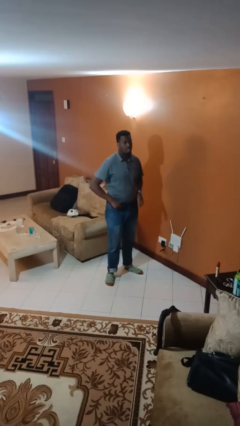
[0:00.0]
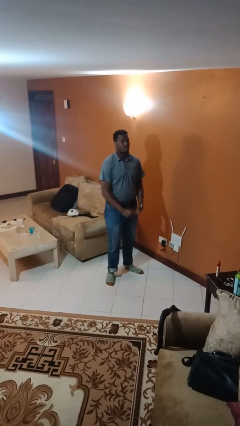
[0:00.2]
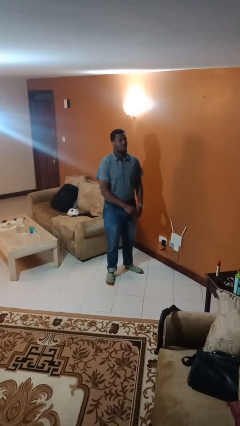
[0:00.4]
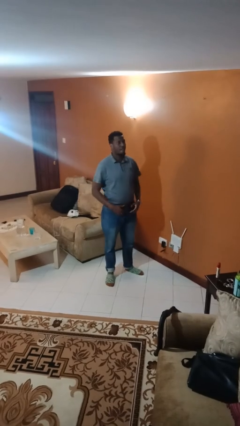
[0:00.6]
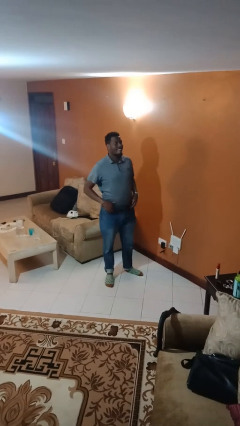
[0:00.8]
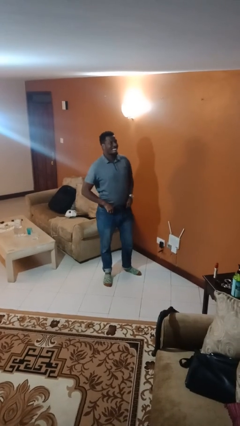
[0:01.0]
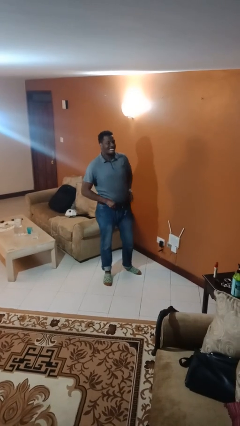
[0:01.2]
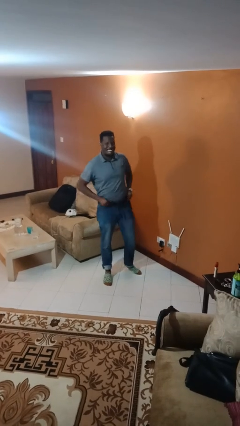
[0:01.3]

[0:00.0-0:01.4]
person hikes up pants

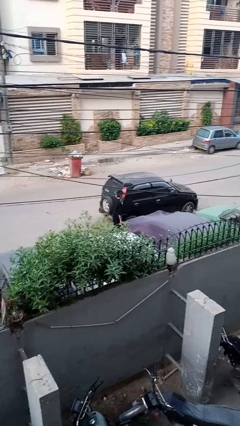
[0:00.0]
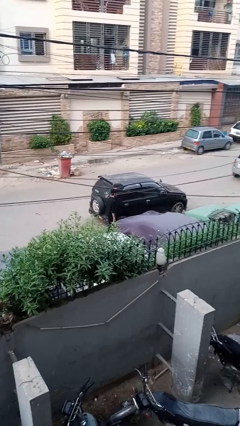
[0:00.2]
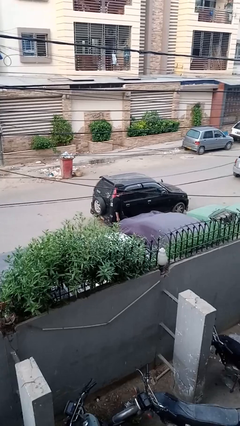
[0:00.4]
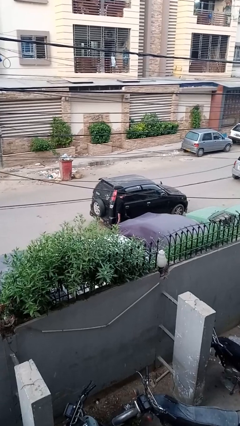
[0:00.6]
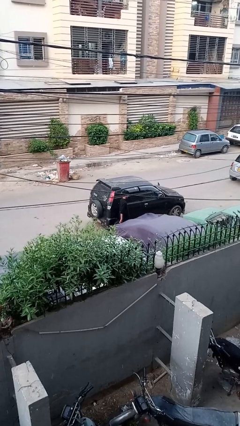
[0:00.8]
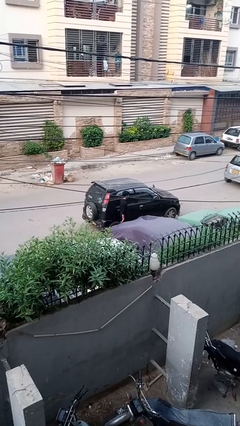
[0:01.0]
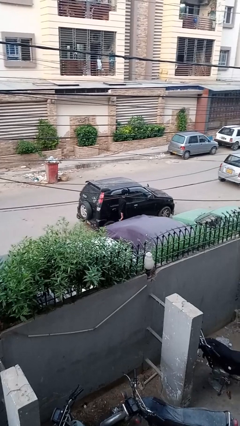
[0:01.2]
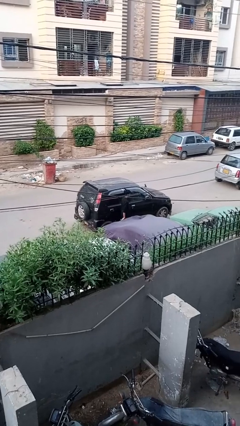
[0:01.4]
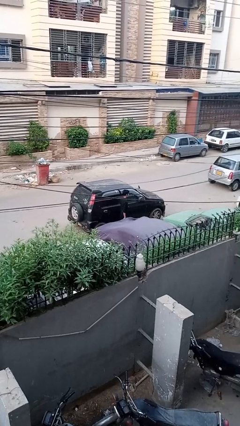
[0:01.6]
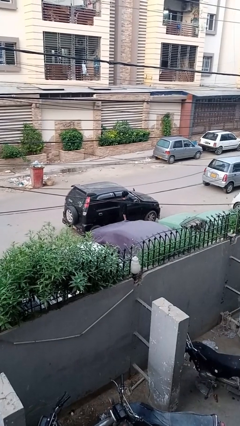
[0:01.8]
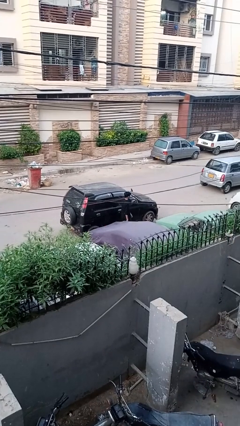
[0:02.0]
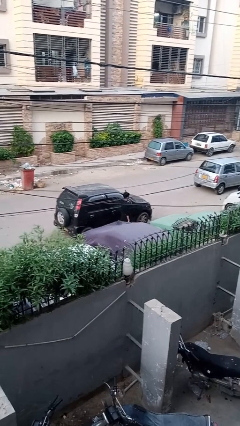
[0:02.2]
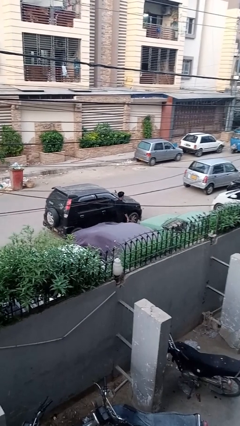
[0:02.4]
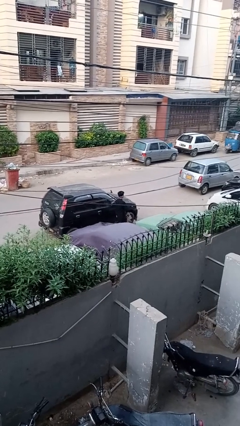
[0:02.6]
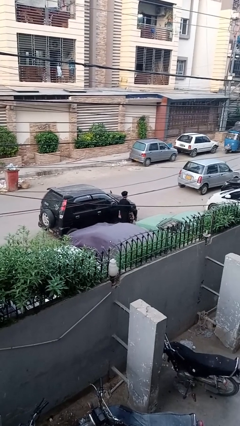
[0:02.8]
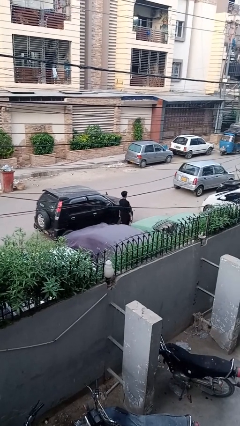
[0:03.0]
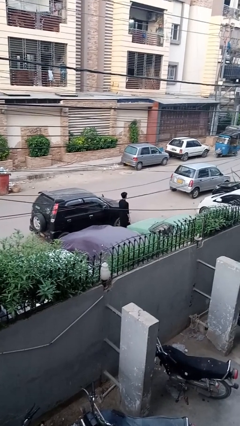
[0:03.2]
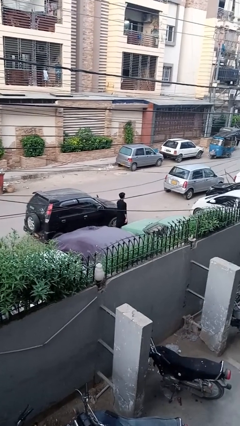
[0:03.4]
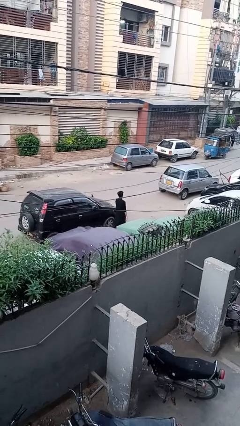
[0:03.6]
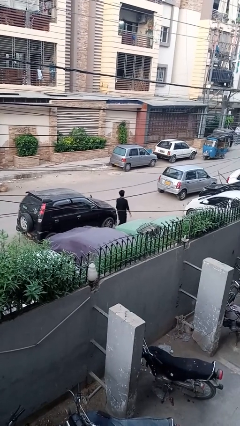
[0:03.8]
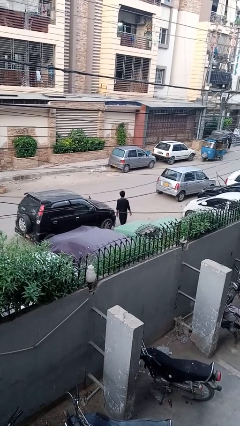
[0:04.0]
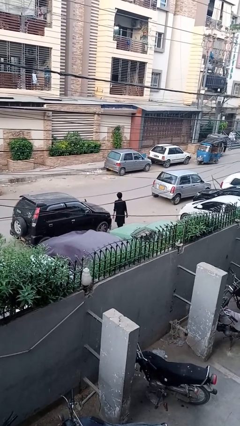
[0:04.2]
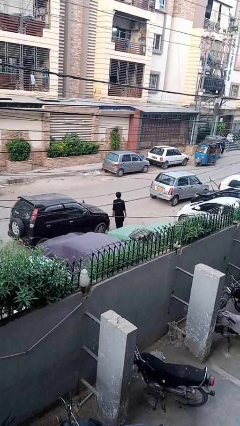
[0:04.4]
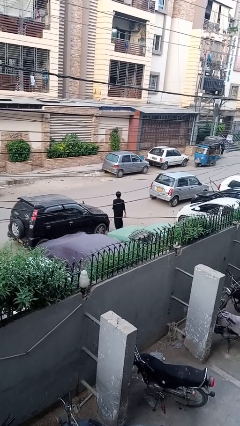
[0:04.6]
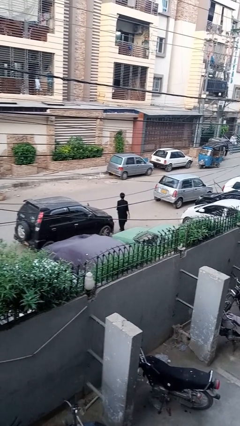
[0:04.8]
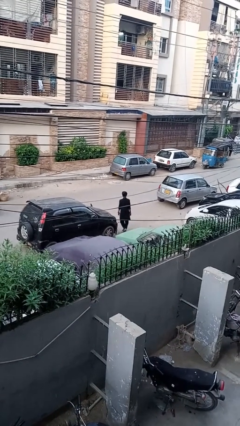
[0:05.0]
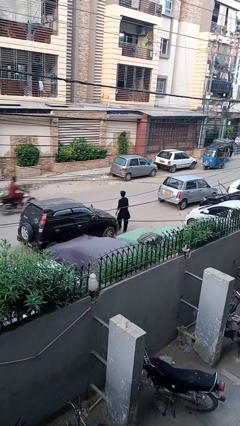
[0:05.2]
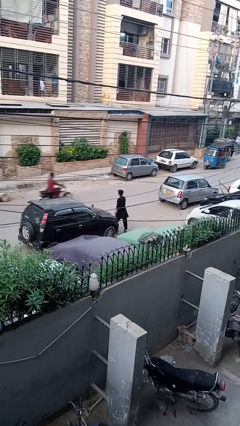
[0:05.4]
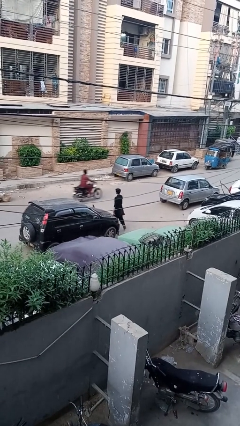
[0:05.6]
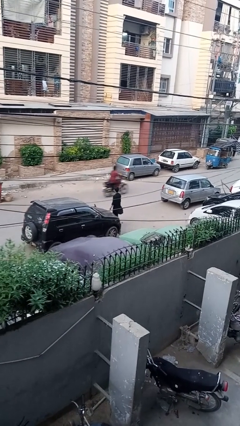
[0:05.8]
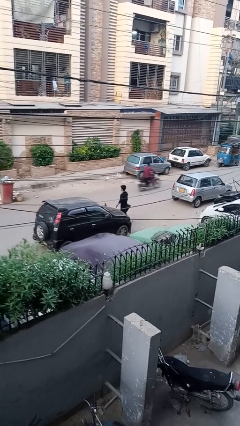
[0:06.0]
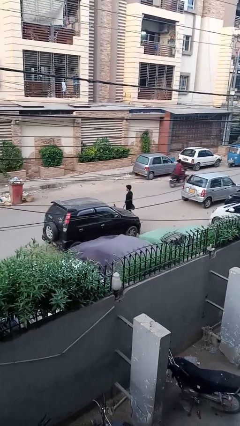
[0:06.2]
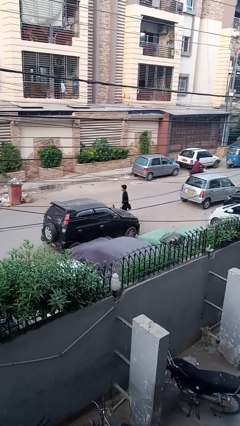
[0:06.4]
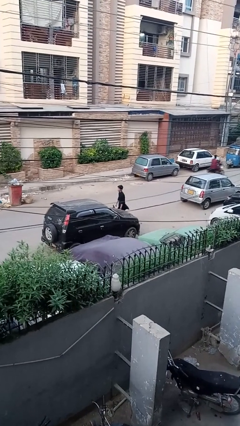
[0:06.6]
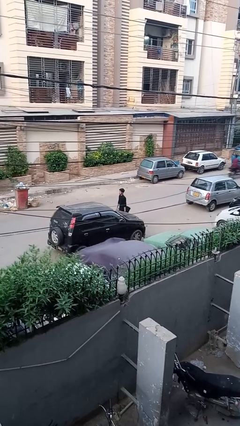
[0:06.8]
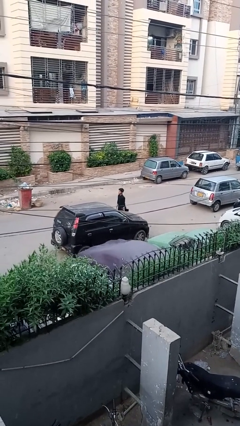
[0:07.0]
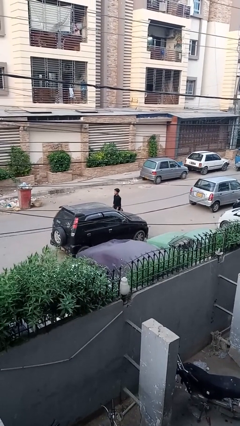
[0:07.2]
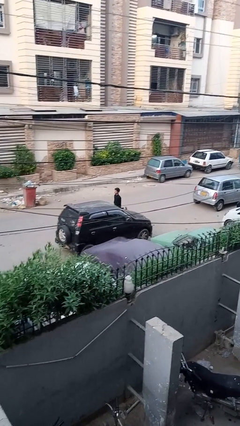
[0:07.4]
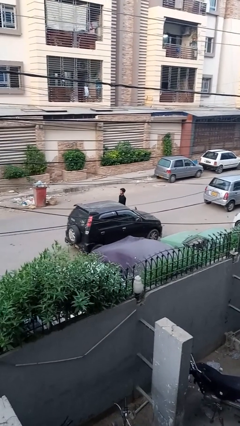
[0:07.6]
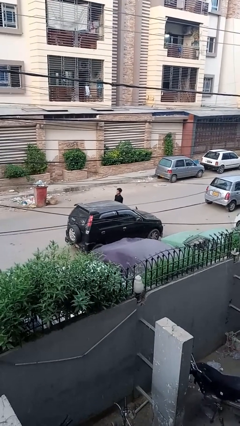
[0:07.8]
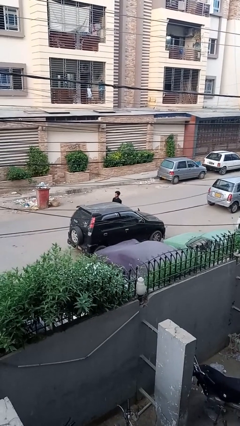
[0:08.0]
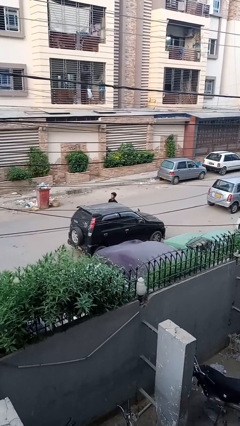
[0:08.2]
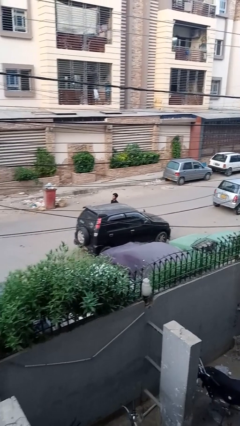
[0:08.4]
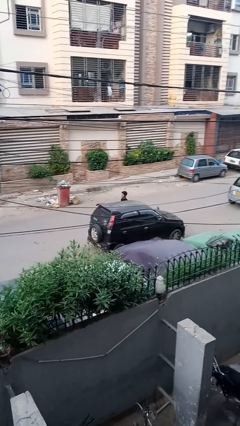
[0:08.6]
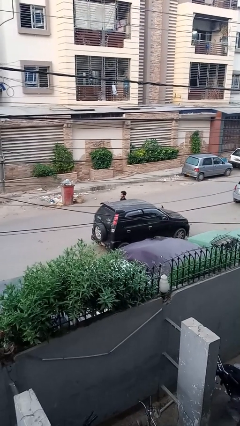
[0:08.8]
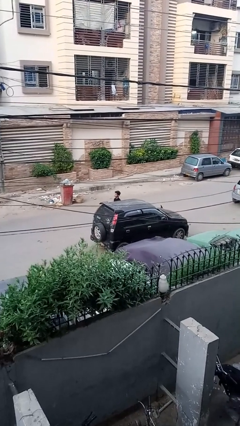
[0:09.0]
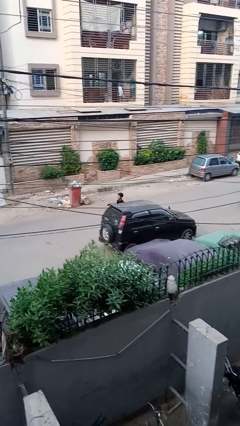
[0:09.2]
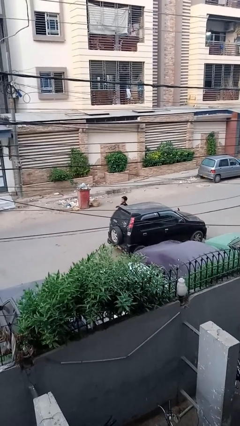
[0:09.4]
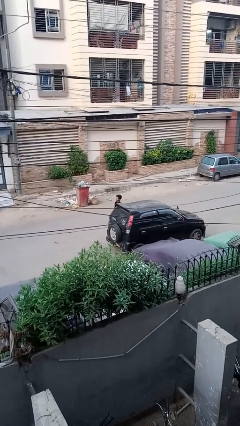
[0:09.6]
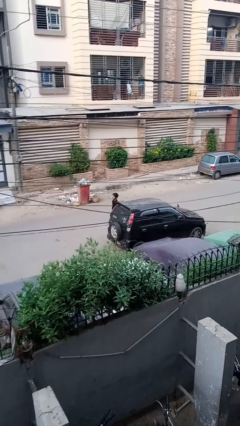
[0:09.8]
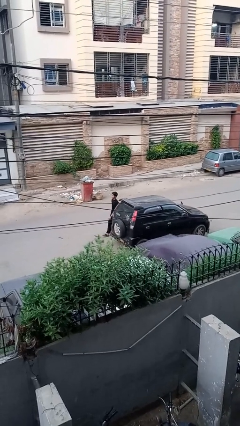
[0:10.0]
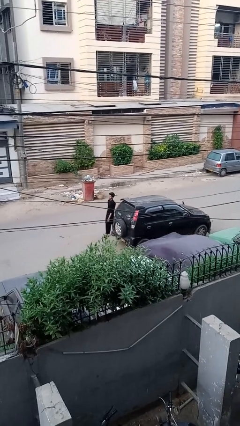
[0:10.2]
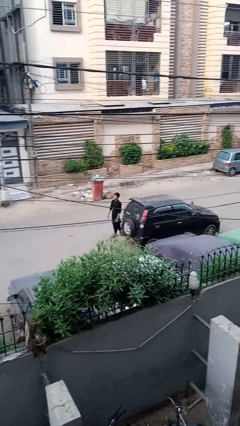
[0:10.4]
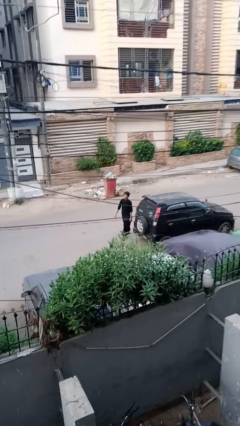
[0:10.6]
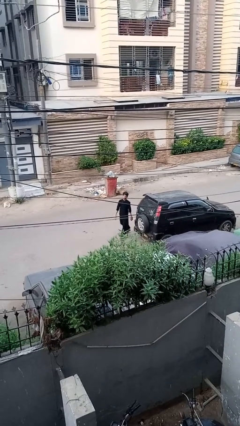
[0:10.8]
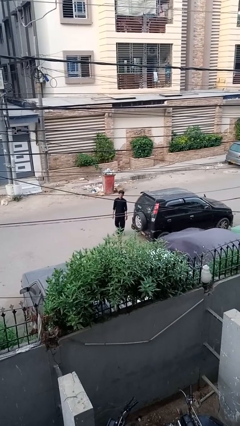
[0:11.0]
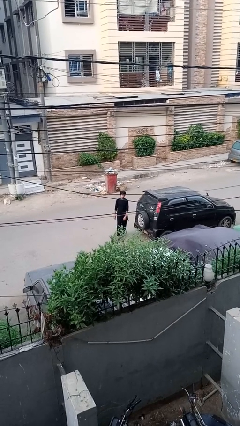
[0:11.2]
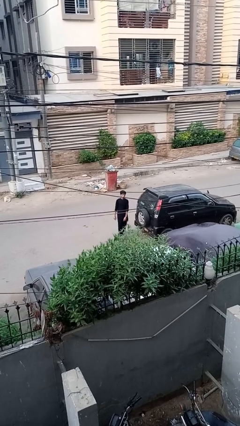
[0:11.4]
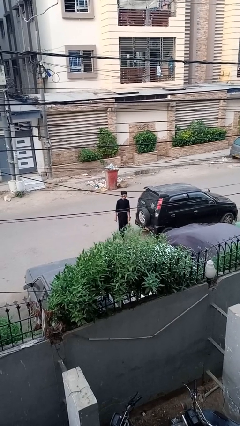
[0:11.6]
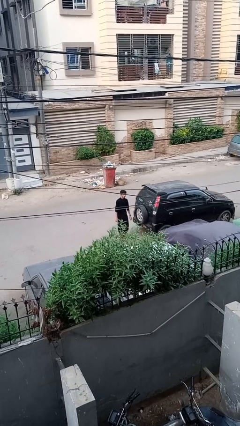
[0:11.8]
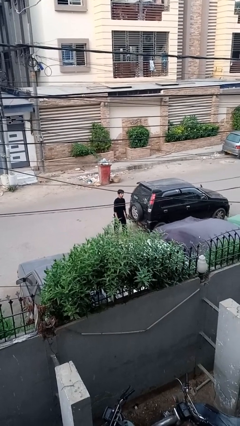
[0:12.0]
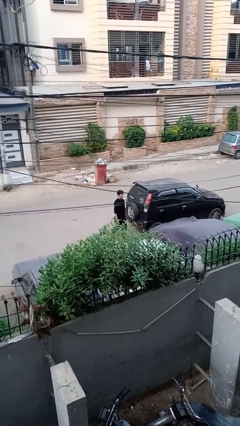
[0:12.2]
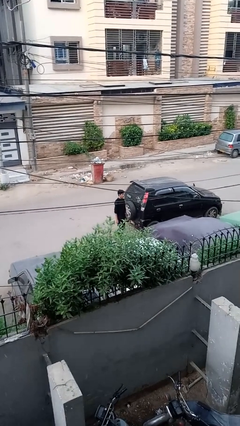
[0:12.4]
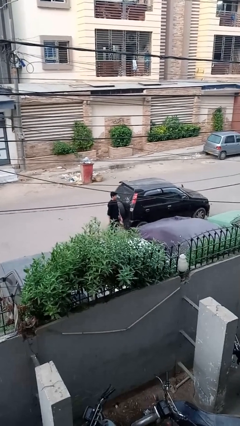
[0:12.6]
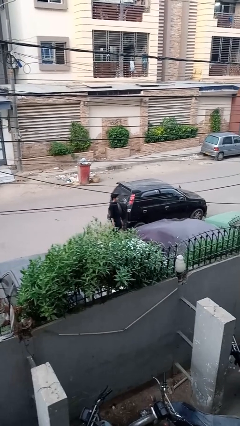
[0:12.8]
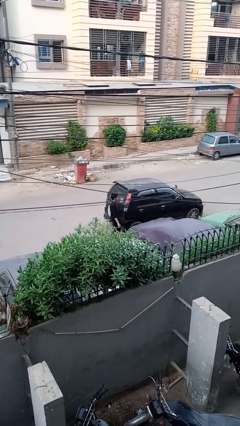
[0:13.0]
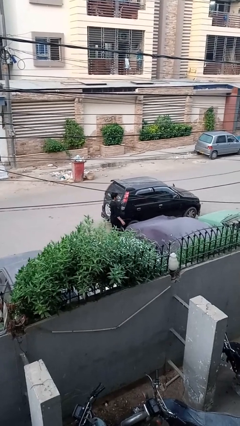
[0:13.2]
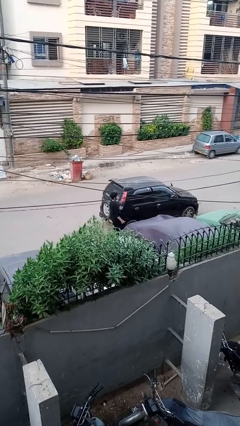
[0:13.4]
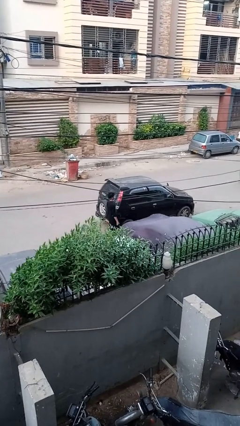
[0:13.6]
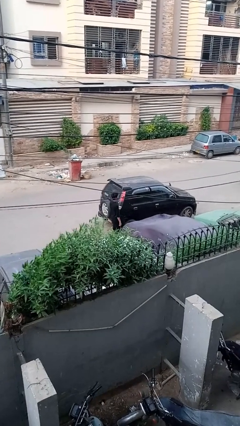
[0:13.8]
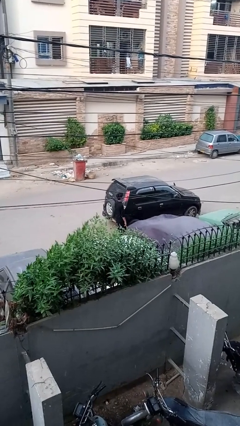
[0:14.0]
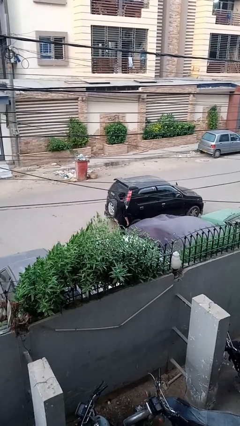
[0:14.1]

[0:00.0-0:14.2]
person walks around car

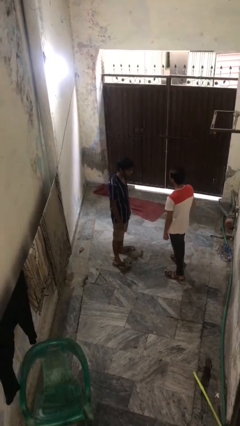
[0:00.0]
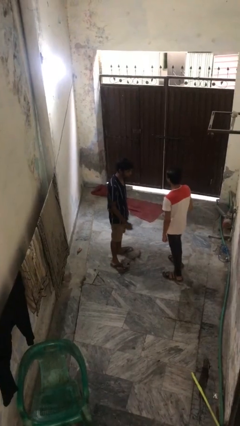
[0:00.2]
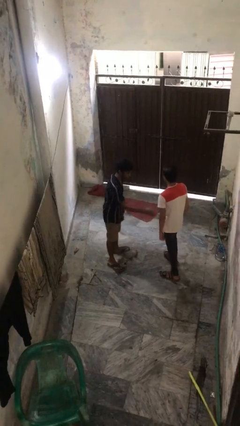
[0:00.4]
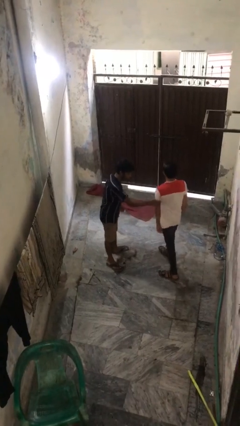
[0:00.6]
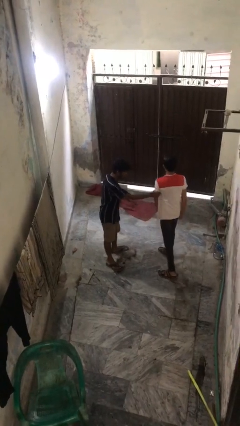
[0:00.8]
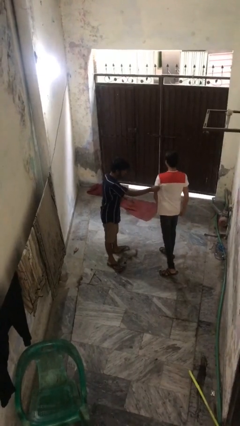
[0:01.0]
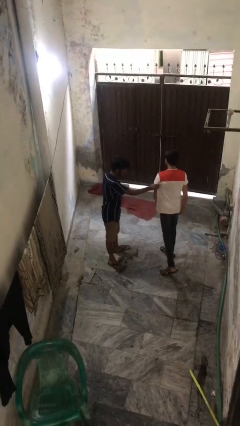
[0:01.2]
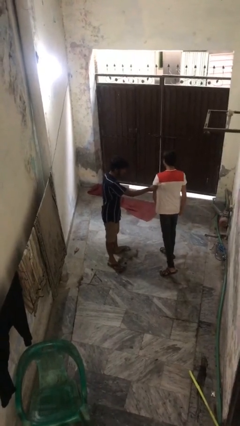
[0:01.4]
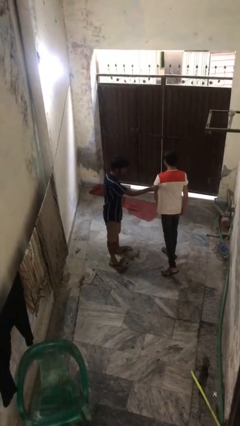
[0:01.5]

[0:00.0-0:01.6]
person grabs person by bicep

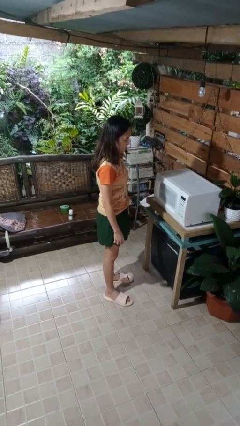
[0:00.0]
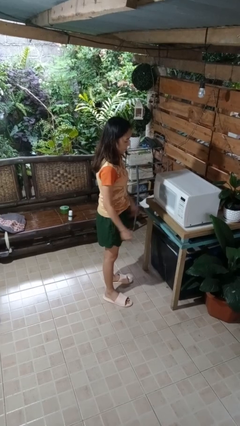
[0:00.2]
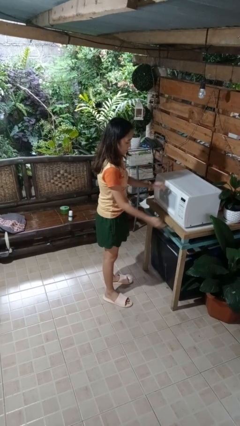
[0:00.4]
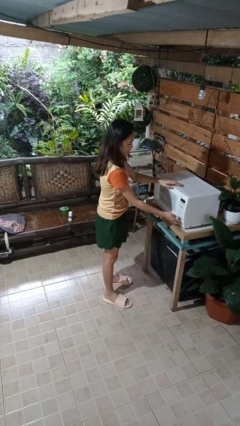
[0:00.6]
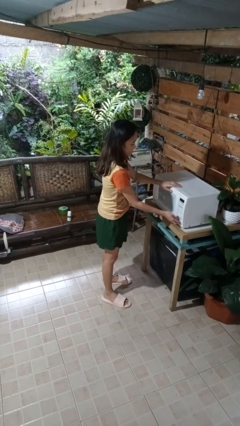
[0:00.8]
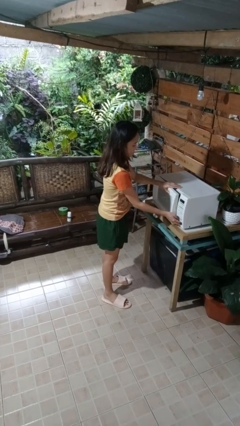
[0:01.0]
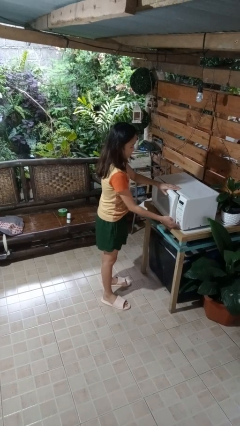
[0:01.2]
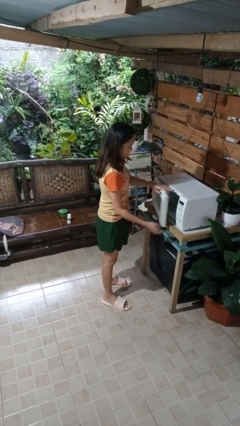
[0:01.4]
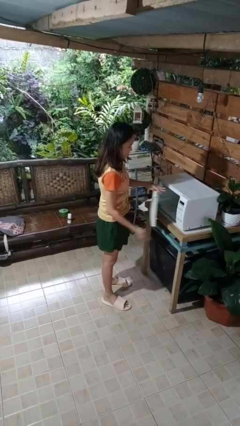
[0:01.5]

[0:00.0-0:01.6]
person opens microwave
